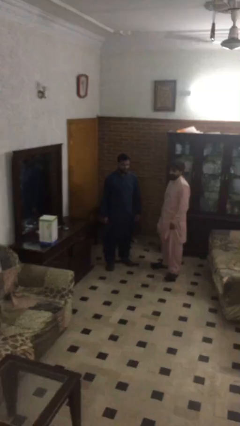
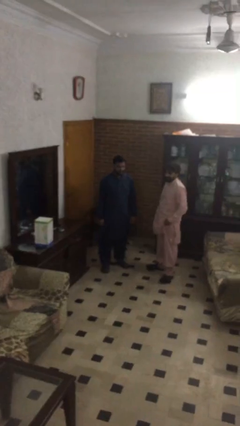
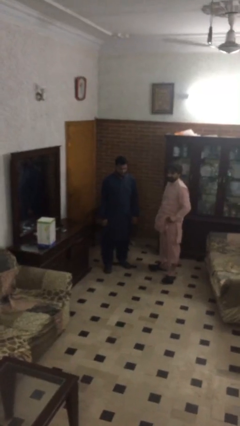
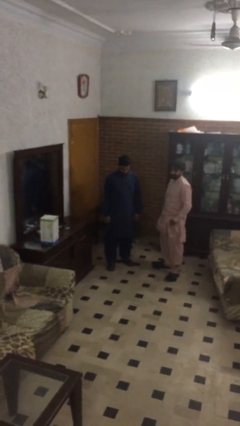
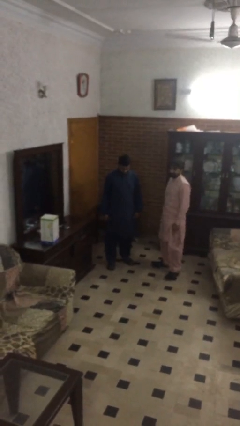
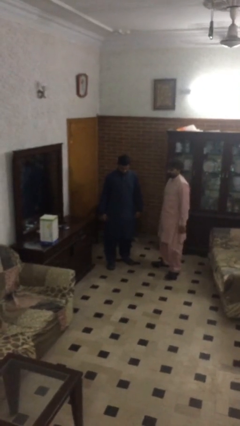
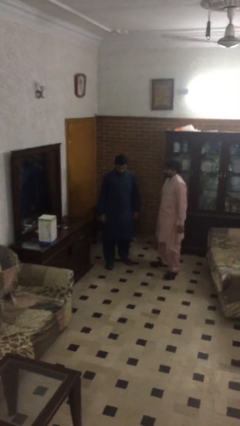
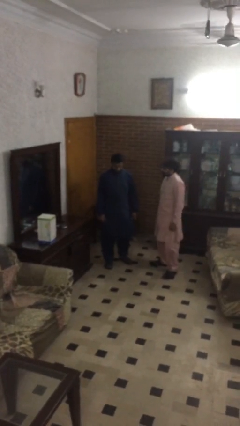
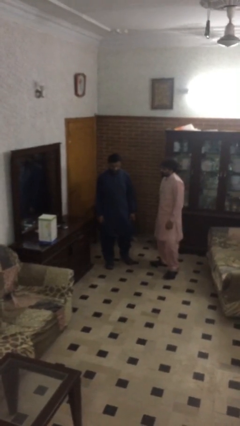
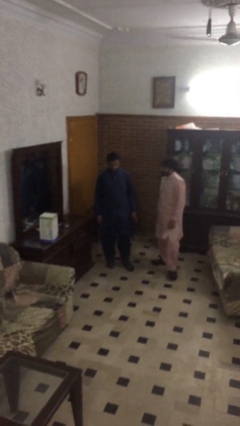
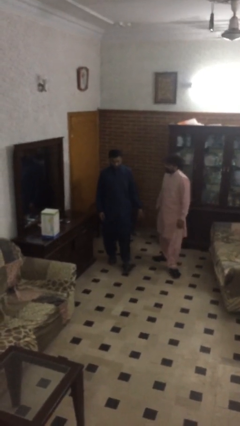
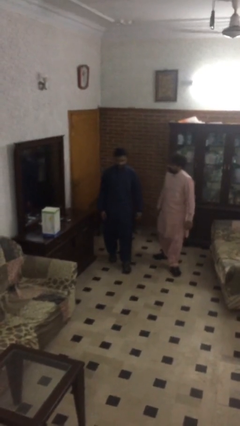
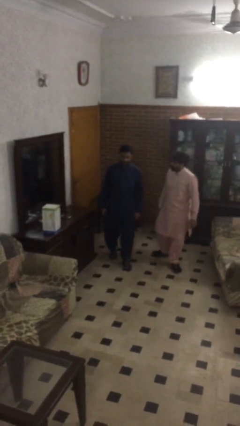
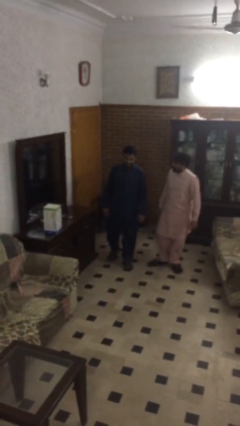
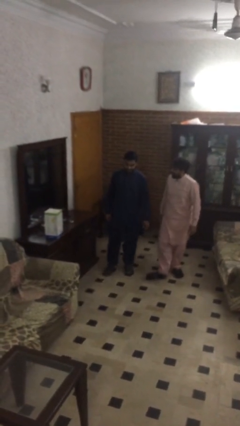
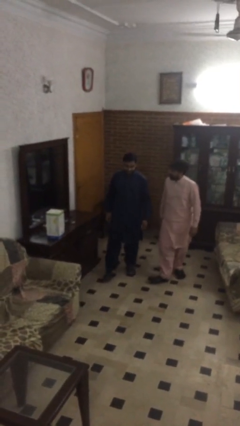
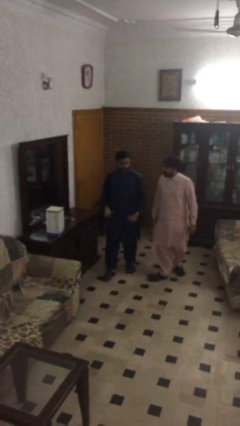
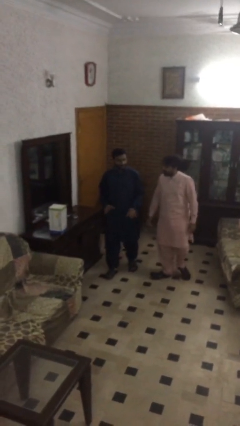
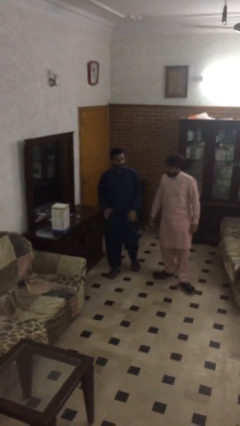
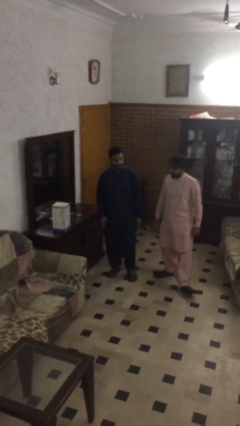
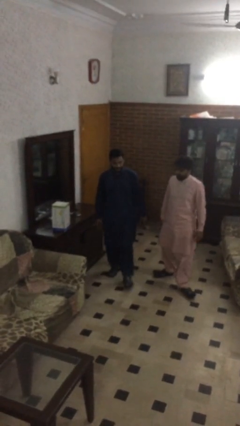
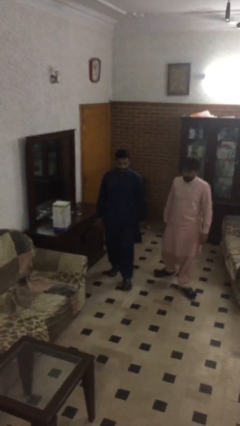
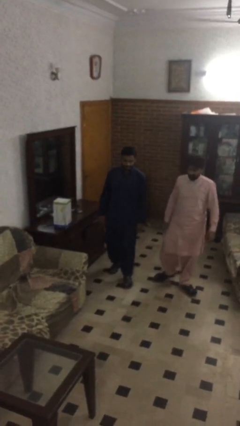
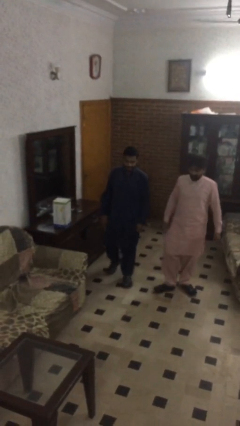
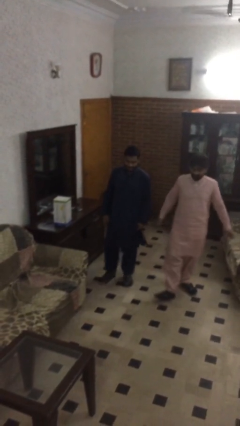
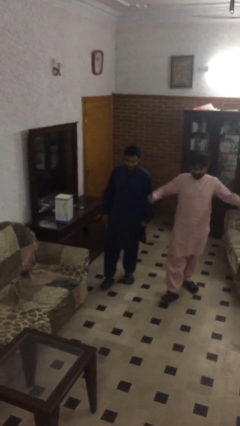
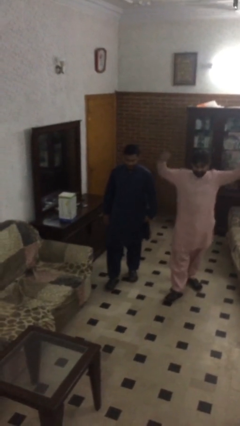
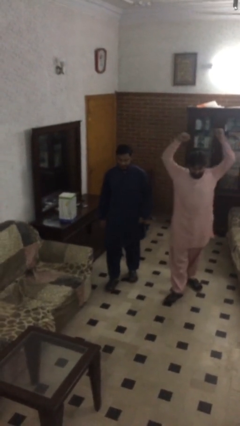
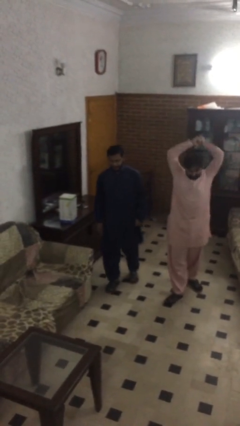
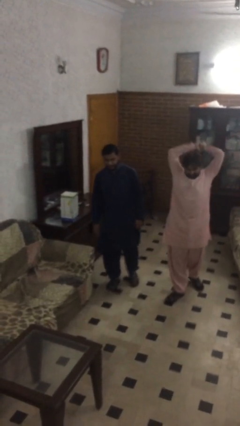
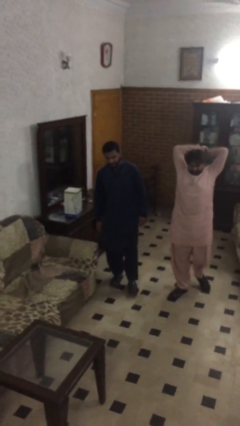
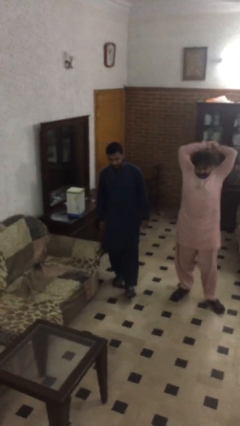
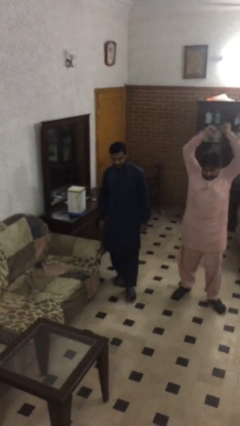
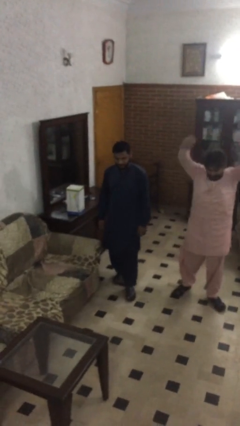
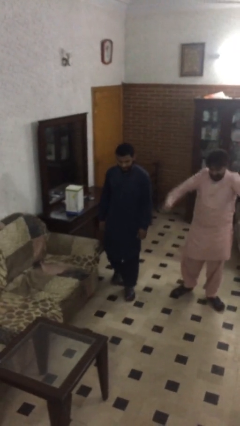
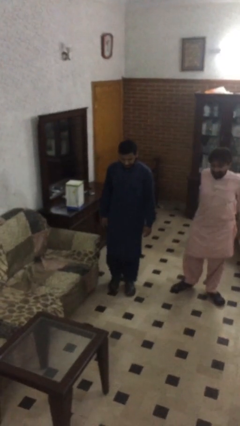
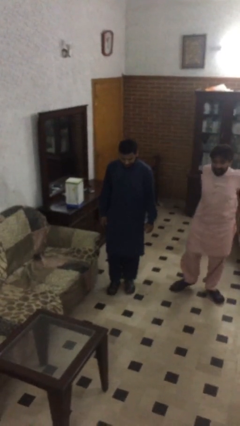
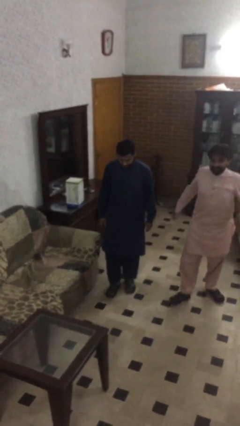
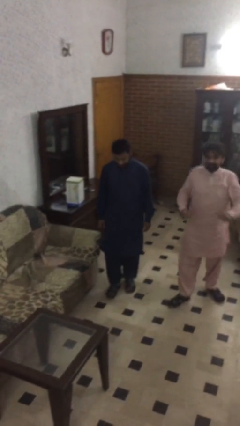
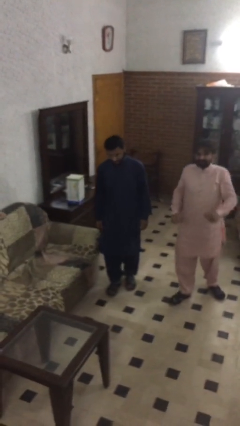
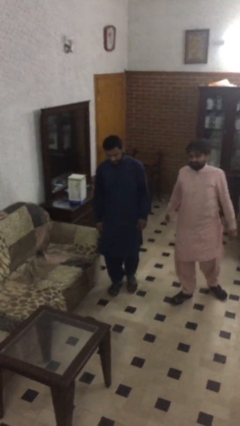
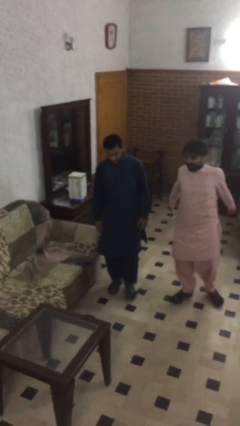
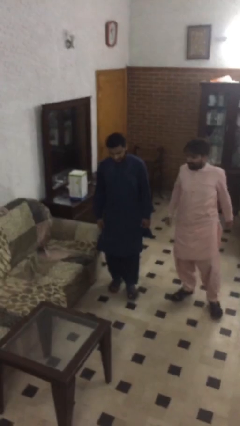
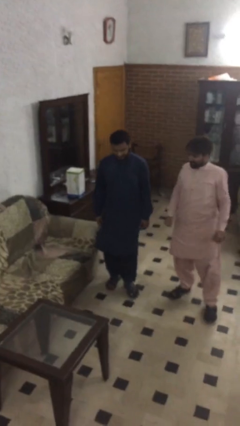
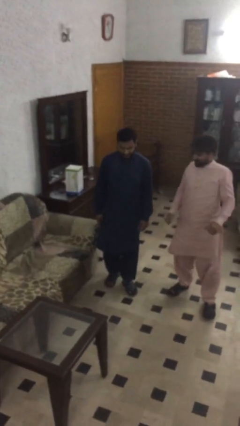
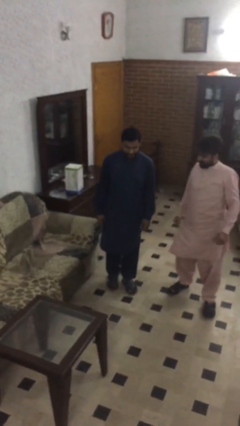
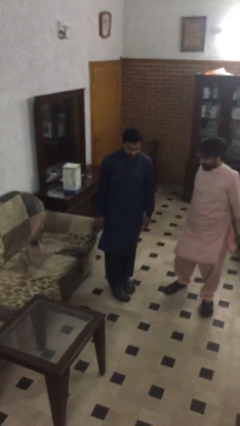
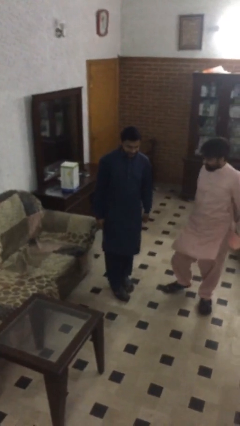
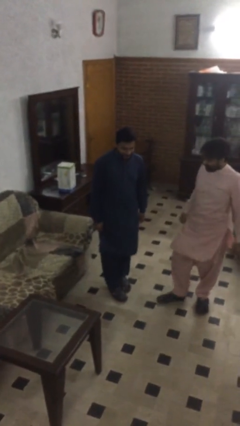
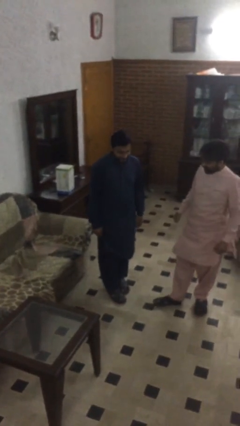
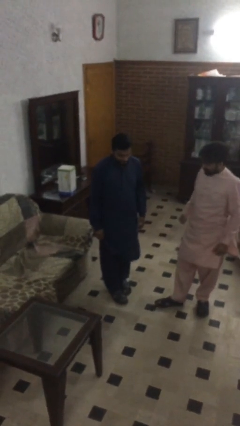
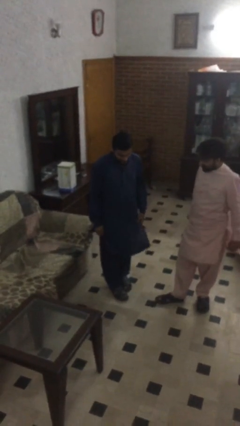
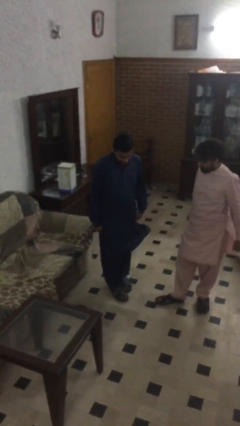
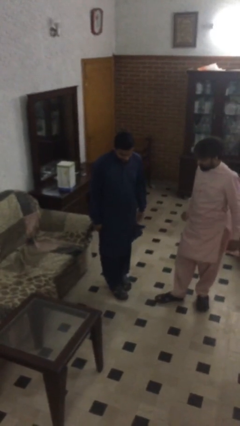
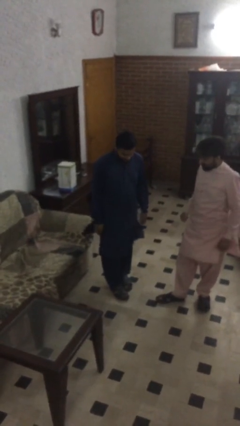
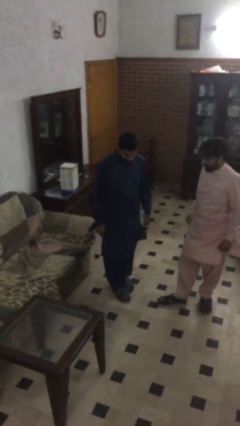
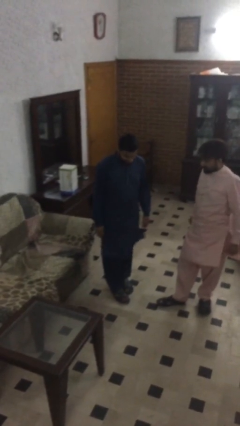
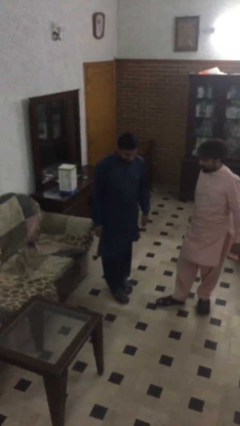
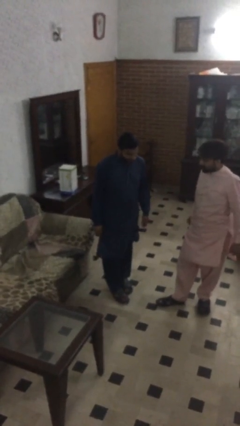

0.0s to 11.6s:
person talks to person

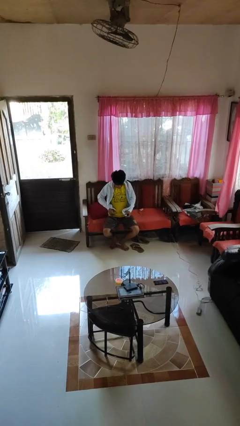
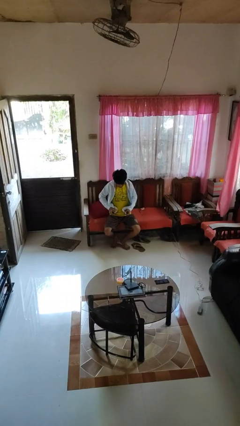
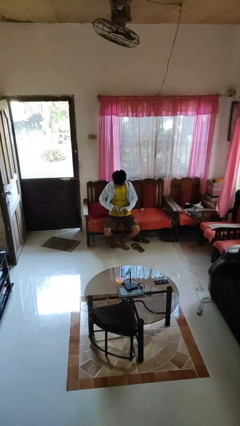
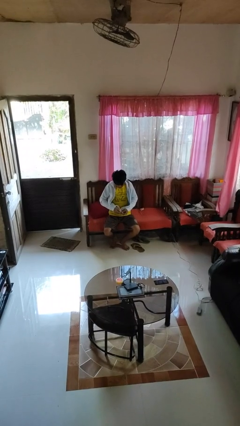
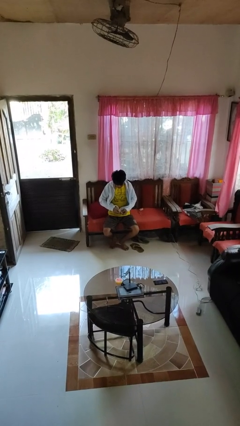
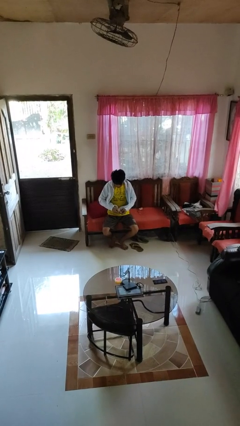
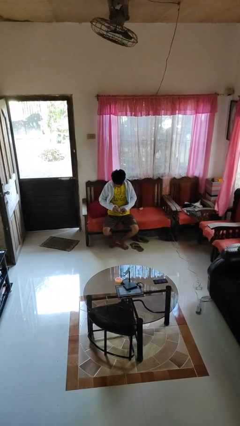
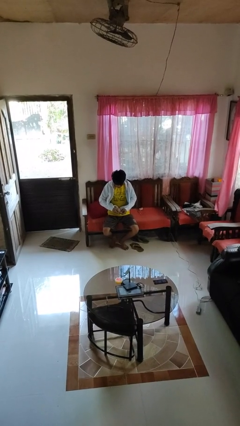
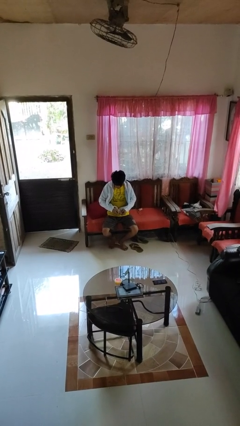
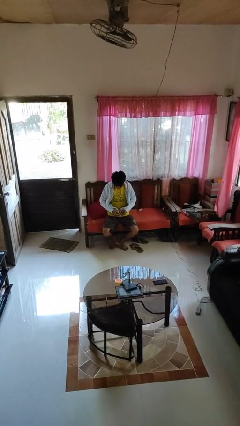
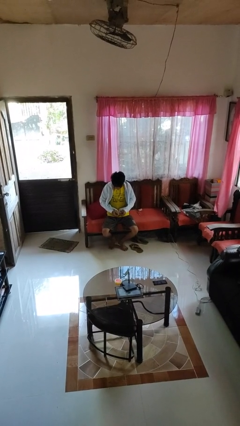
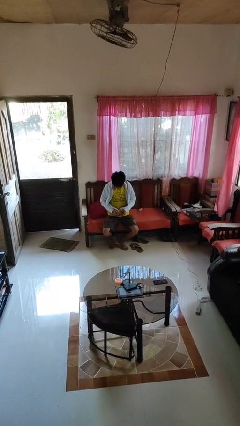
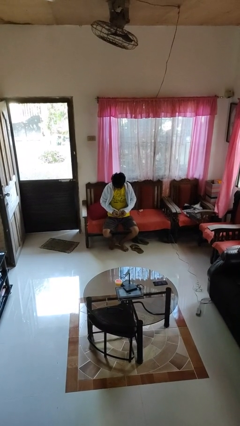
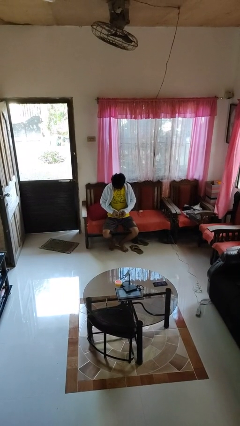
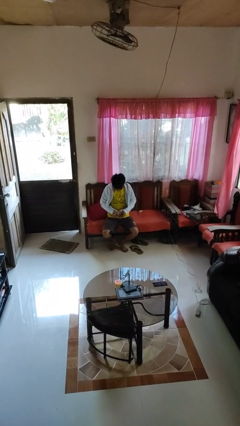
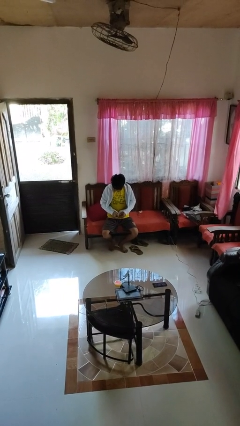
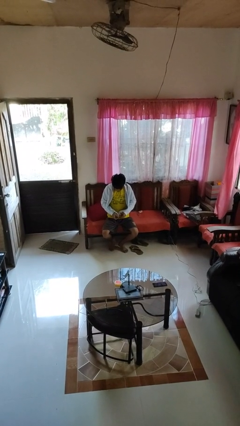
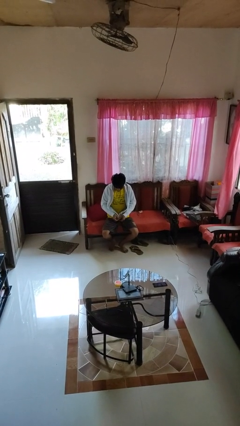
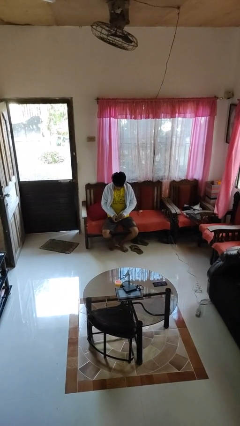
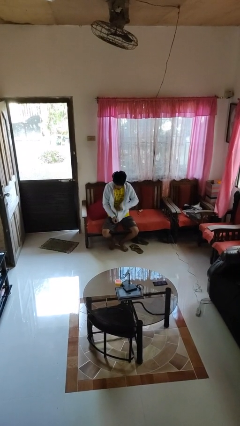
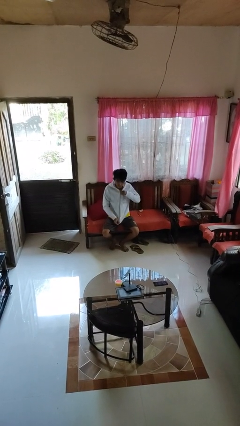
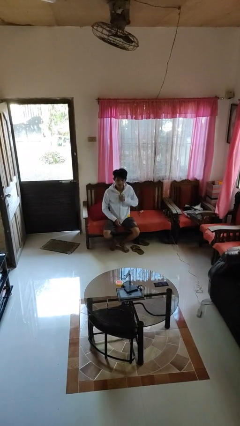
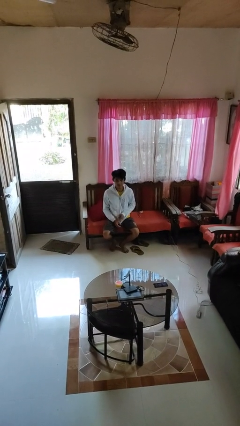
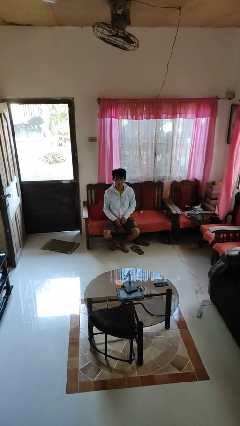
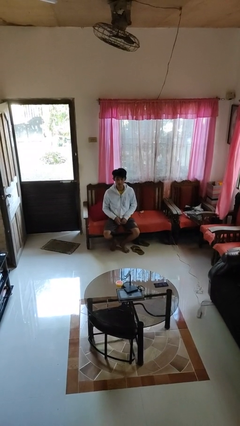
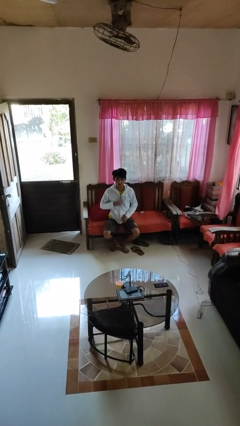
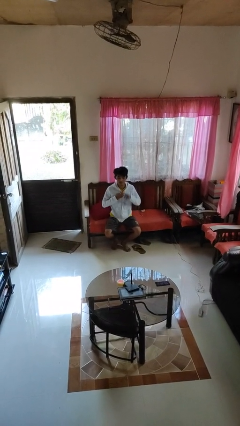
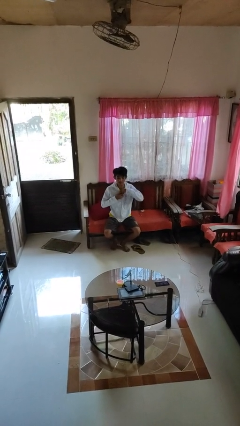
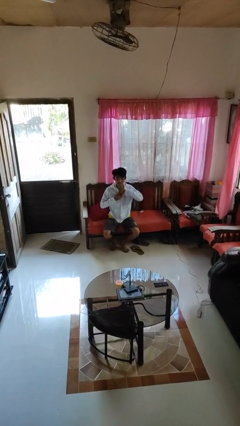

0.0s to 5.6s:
person zips up jacket

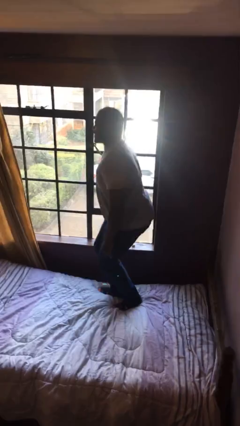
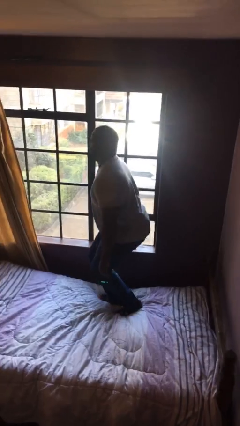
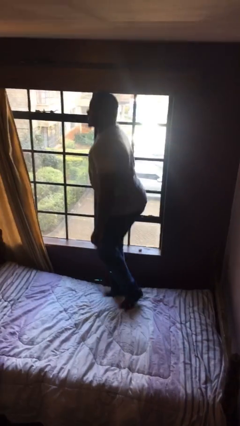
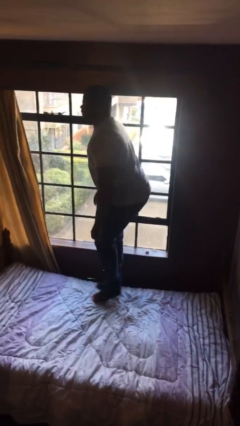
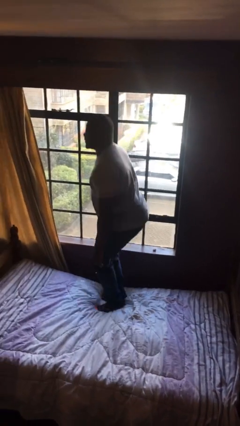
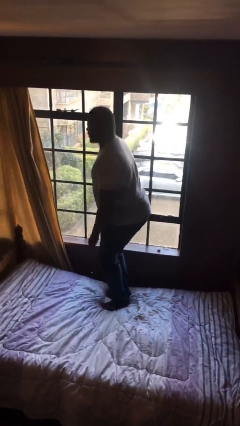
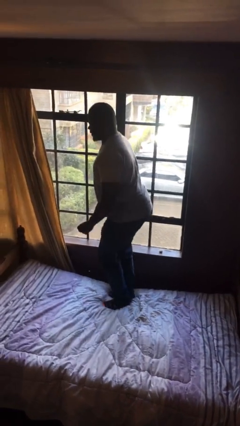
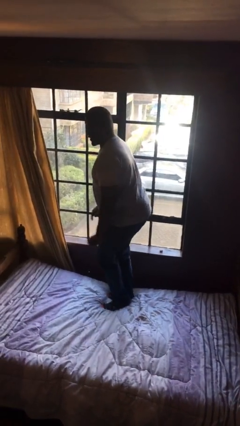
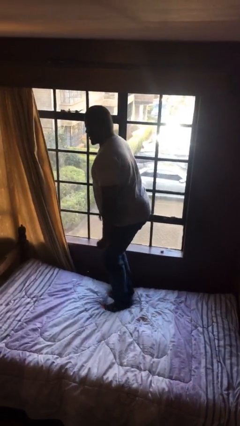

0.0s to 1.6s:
person jumps on bed
